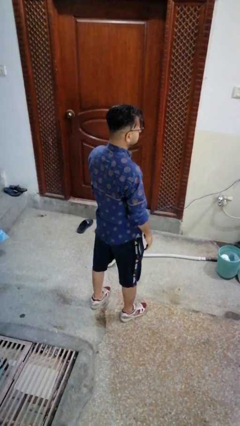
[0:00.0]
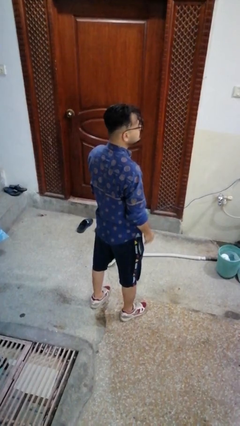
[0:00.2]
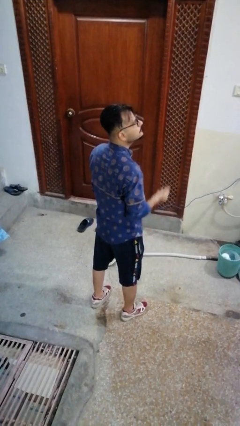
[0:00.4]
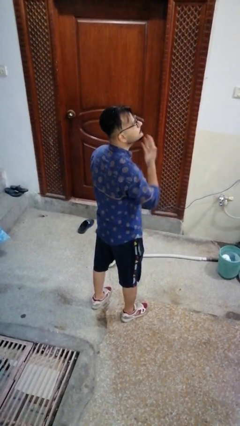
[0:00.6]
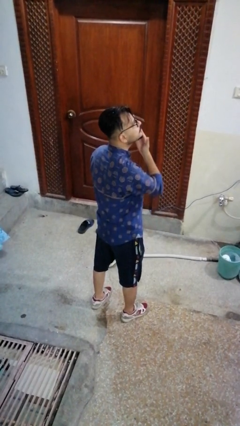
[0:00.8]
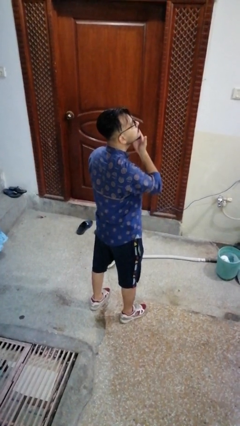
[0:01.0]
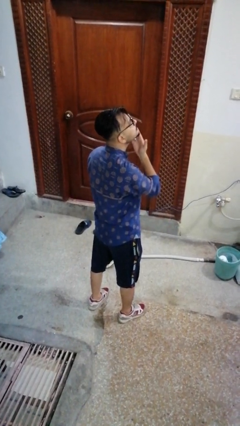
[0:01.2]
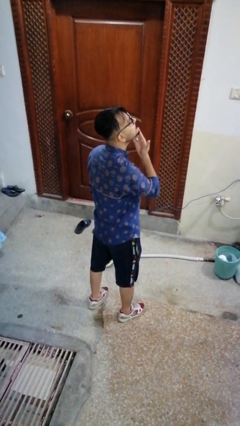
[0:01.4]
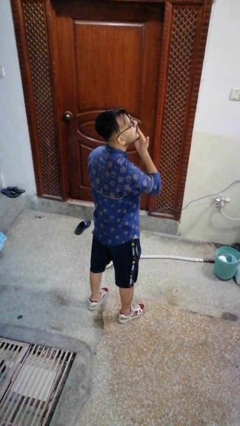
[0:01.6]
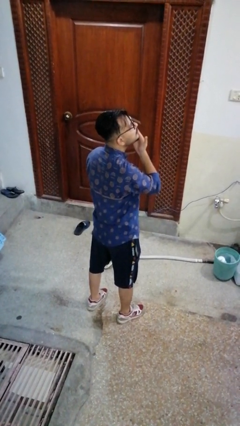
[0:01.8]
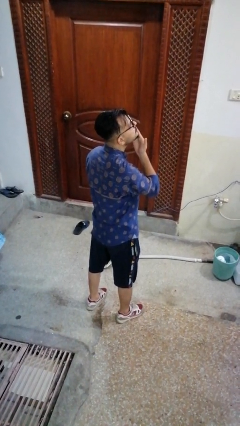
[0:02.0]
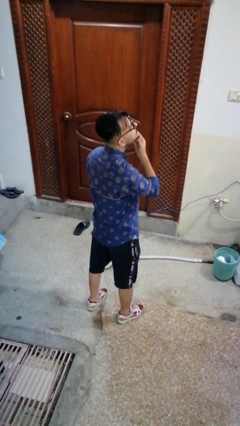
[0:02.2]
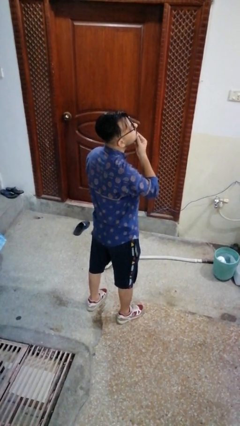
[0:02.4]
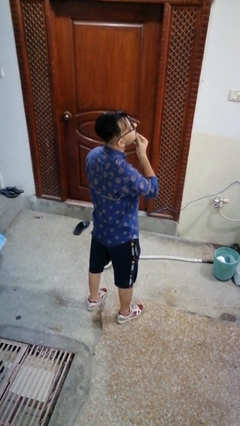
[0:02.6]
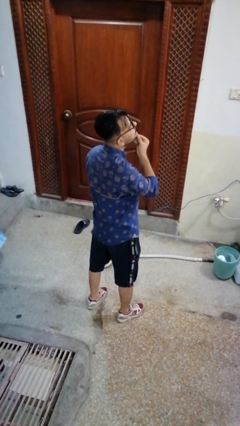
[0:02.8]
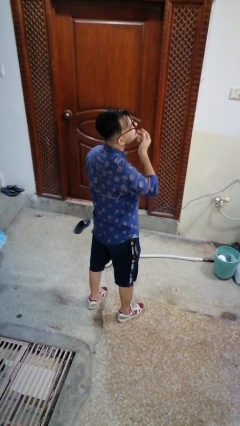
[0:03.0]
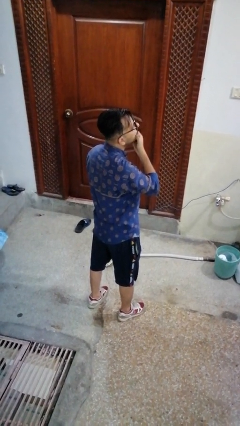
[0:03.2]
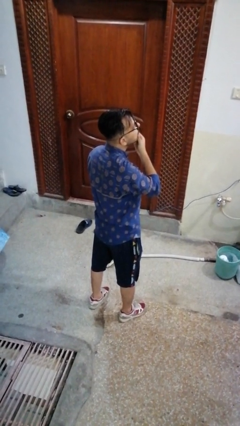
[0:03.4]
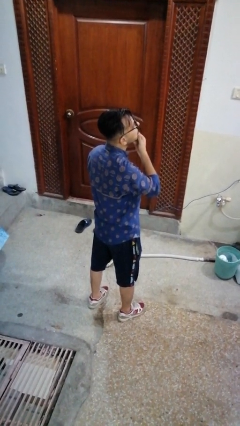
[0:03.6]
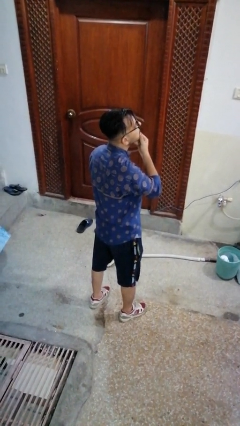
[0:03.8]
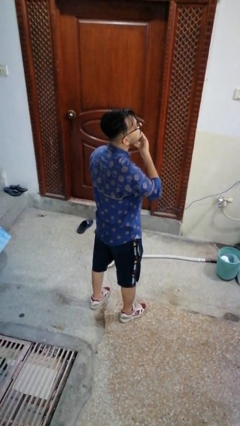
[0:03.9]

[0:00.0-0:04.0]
person strokes chin

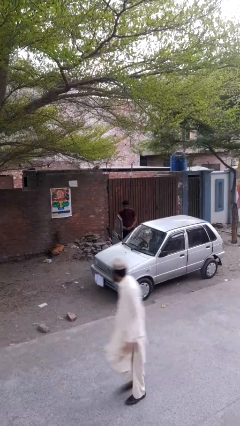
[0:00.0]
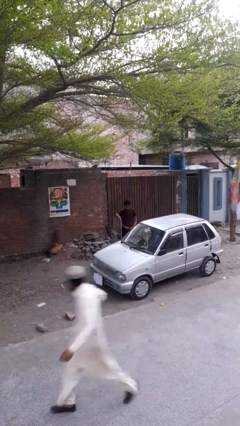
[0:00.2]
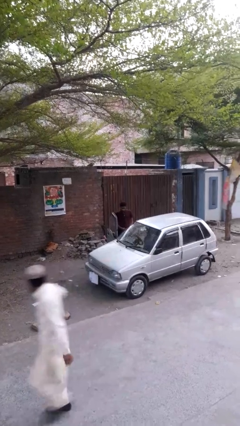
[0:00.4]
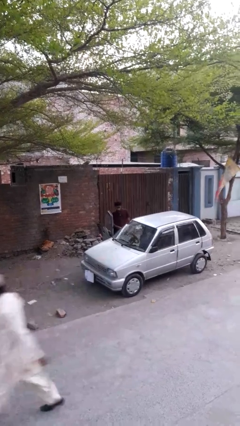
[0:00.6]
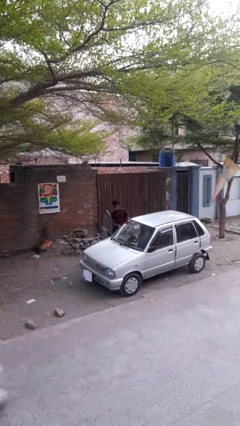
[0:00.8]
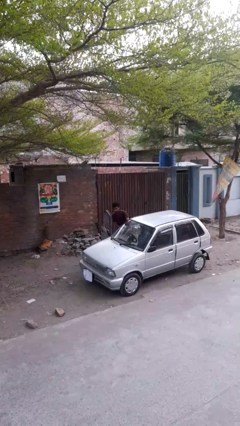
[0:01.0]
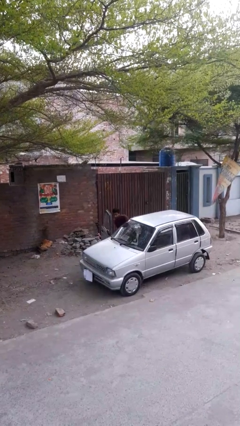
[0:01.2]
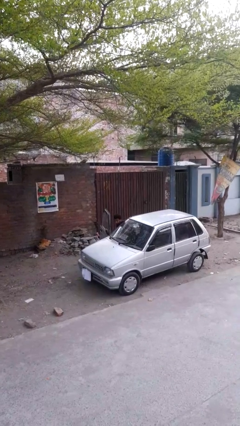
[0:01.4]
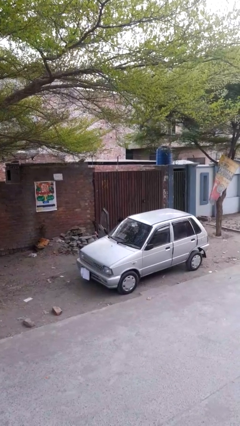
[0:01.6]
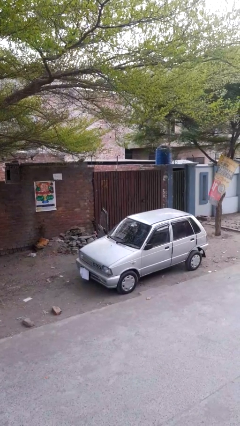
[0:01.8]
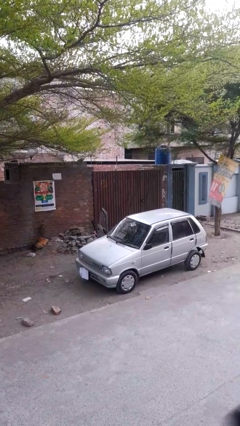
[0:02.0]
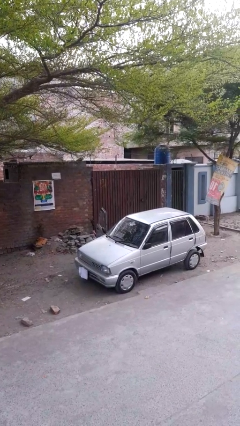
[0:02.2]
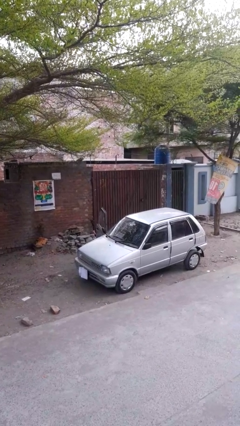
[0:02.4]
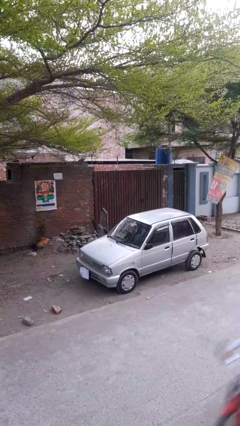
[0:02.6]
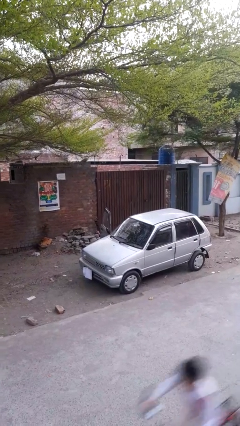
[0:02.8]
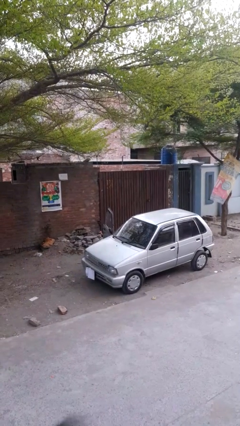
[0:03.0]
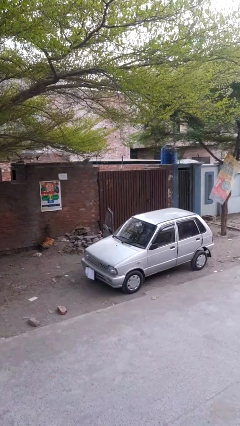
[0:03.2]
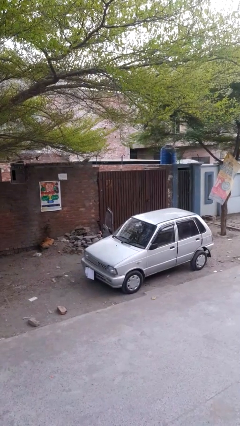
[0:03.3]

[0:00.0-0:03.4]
person enters car

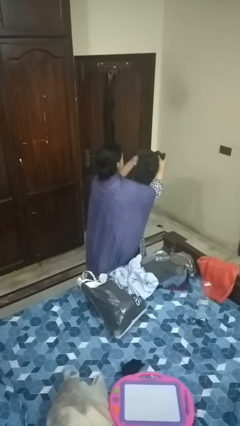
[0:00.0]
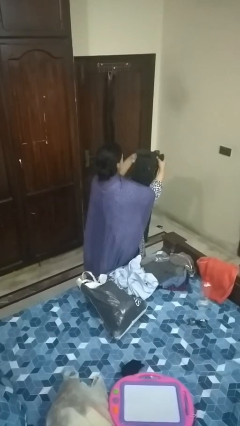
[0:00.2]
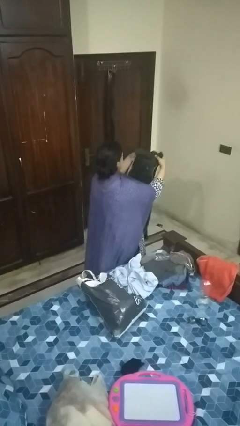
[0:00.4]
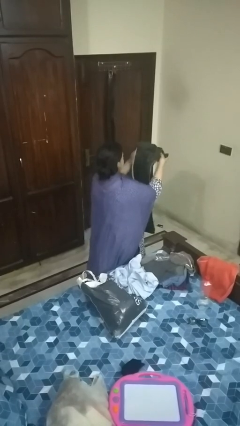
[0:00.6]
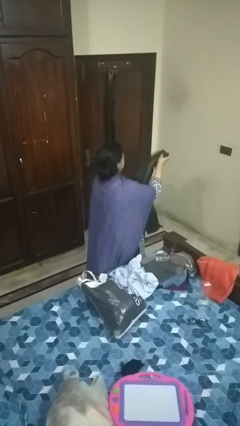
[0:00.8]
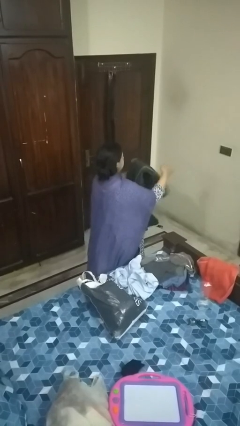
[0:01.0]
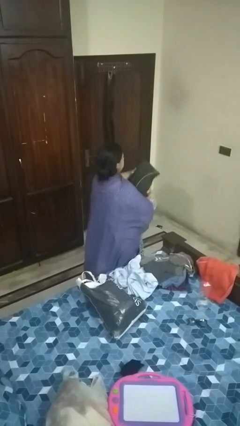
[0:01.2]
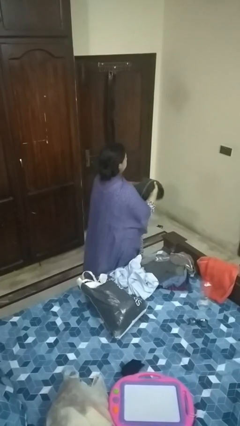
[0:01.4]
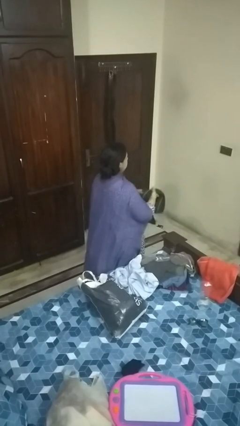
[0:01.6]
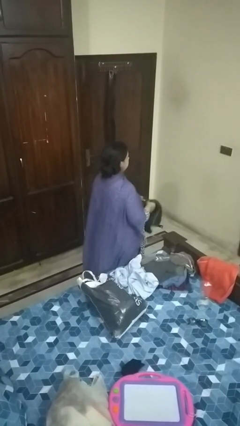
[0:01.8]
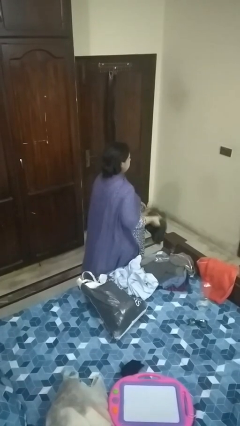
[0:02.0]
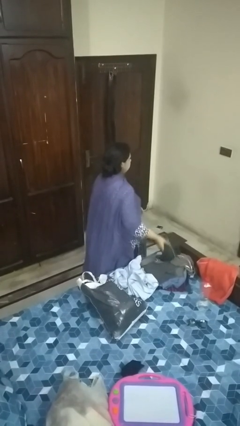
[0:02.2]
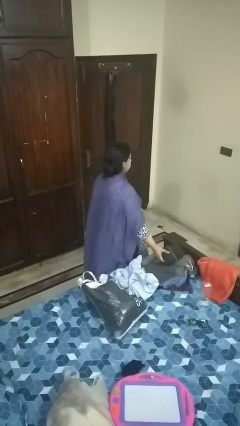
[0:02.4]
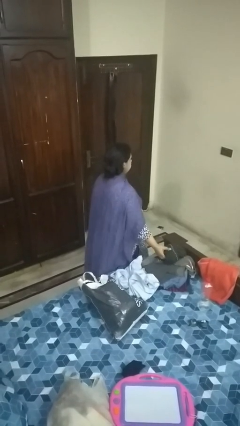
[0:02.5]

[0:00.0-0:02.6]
person folds pants

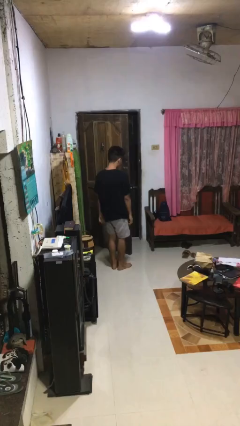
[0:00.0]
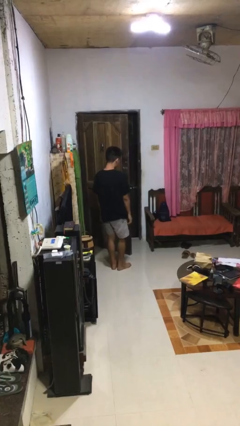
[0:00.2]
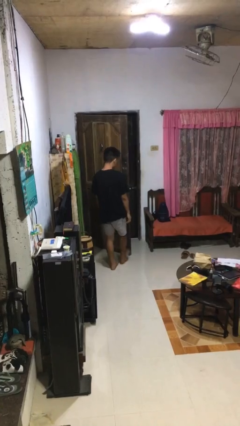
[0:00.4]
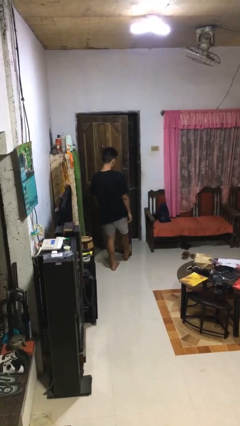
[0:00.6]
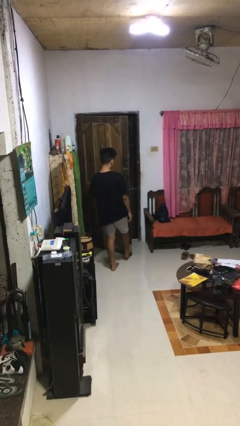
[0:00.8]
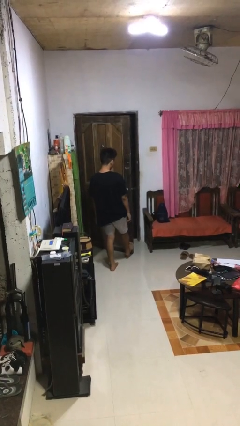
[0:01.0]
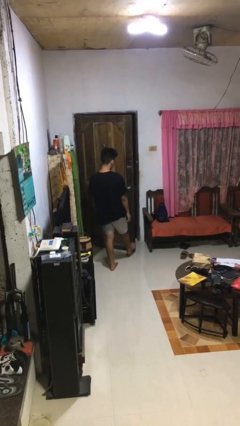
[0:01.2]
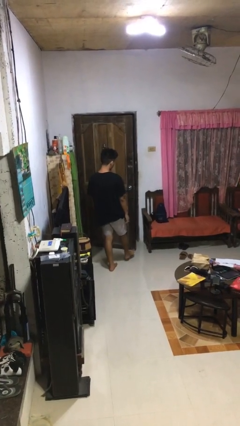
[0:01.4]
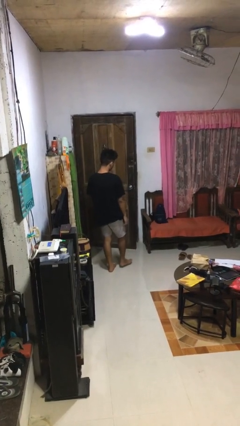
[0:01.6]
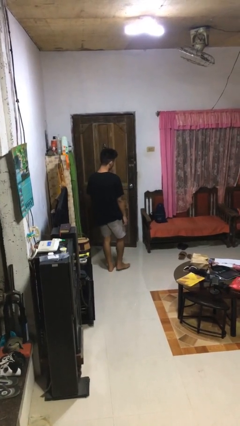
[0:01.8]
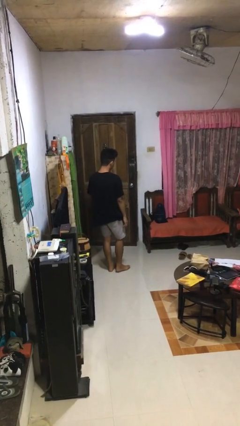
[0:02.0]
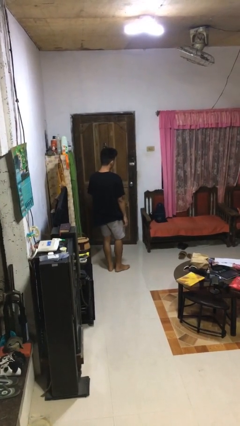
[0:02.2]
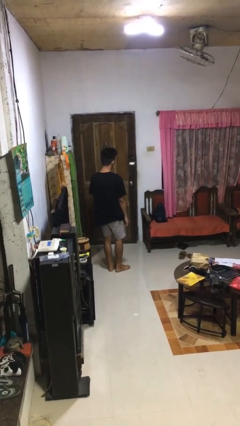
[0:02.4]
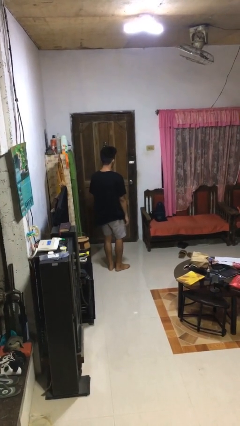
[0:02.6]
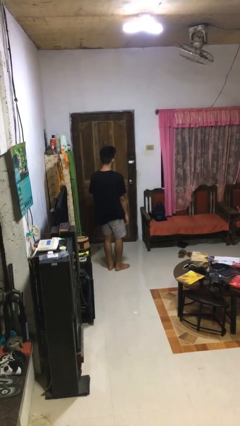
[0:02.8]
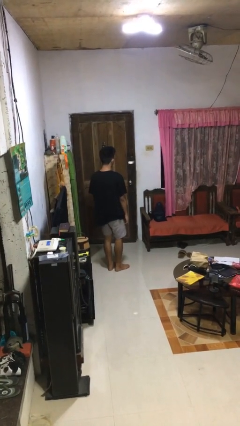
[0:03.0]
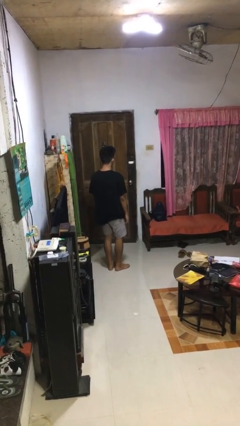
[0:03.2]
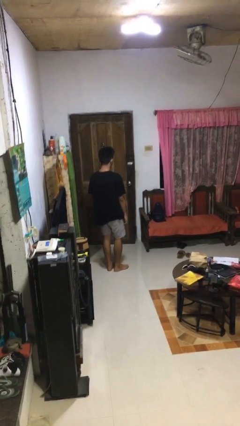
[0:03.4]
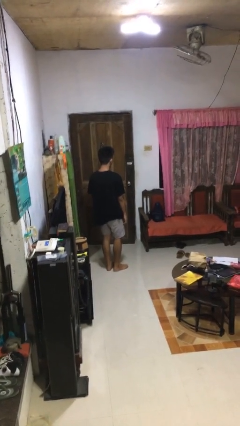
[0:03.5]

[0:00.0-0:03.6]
person closes door with foot

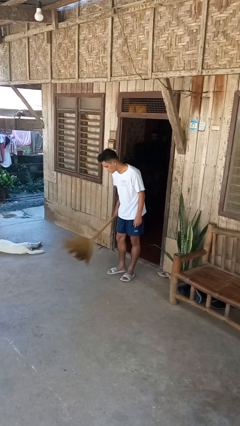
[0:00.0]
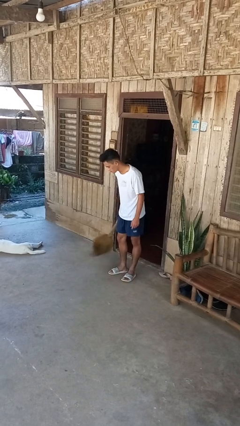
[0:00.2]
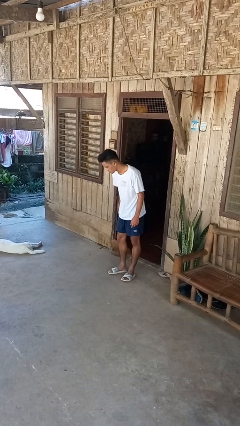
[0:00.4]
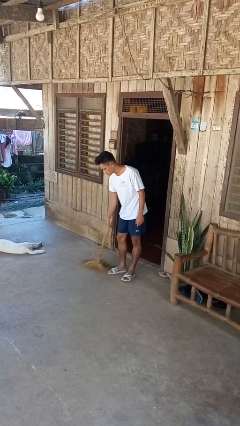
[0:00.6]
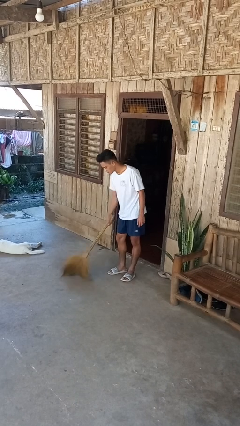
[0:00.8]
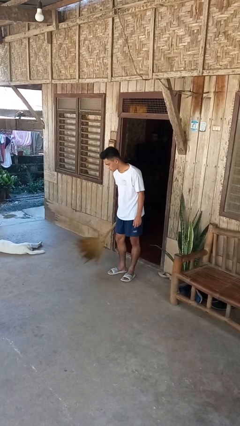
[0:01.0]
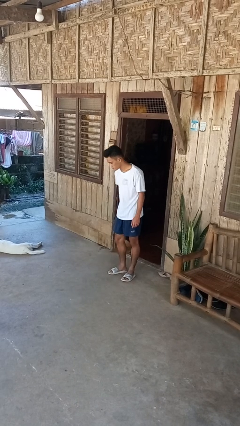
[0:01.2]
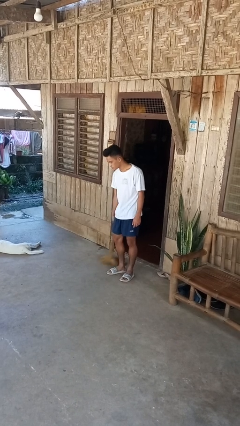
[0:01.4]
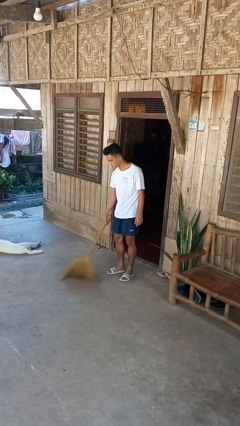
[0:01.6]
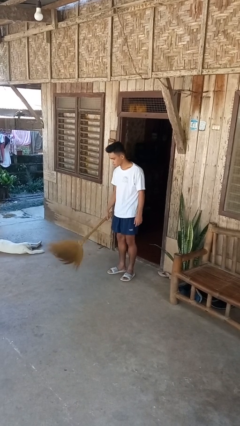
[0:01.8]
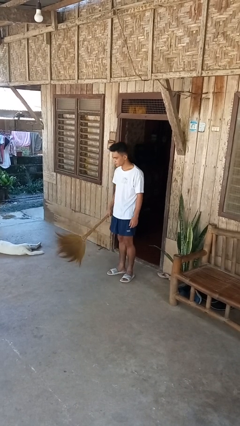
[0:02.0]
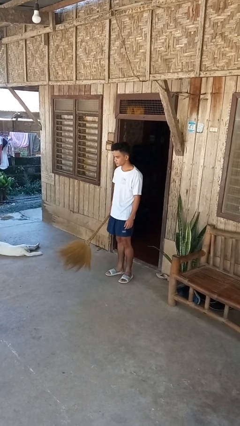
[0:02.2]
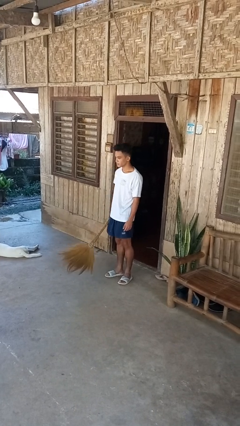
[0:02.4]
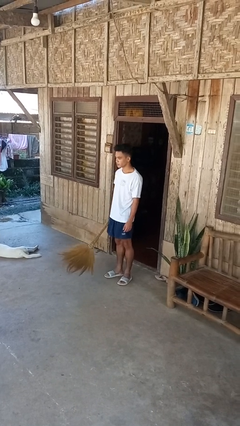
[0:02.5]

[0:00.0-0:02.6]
person sweeps floor

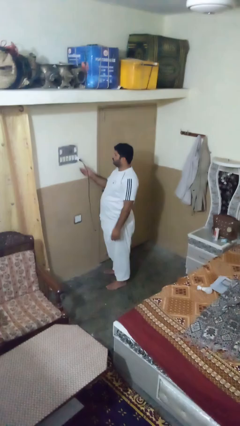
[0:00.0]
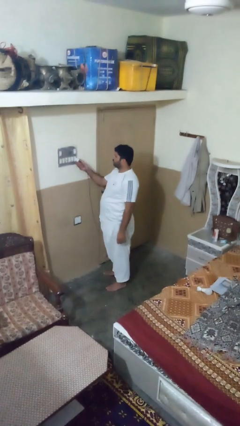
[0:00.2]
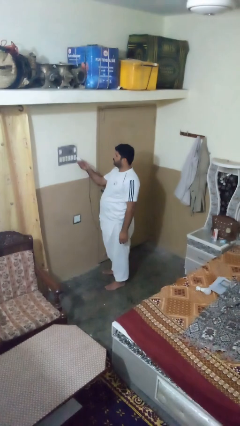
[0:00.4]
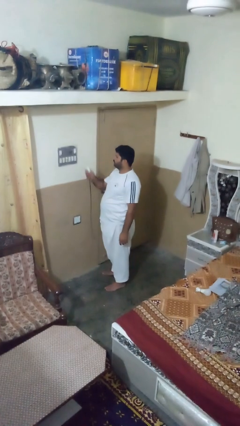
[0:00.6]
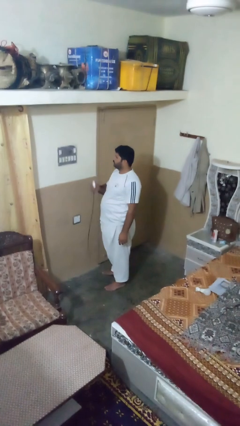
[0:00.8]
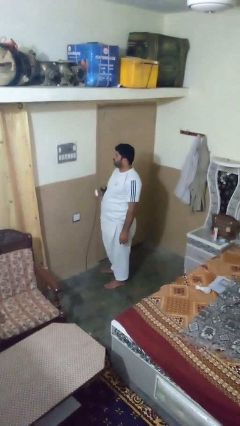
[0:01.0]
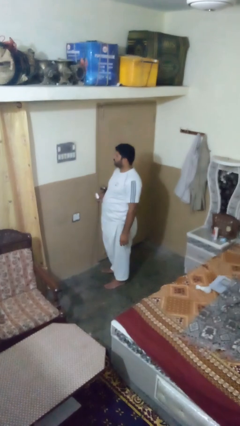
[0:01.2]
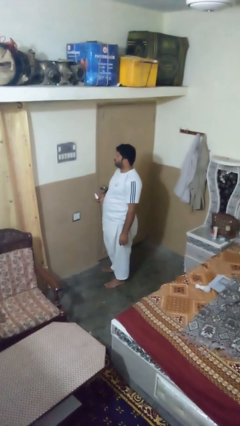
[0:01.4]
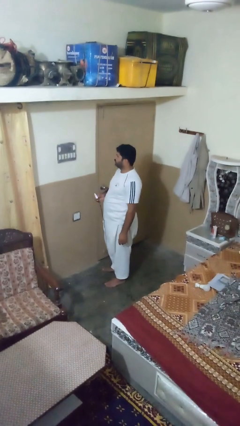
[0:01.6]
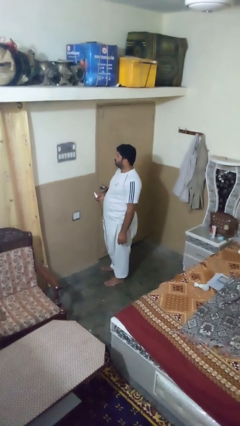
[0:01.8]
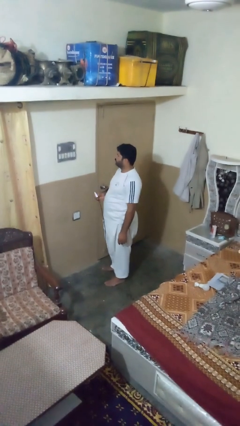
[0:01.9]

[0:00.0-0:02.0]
person unplugs from electrical socket
